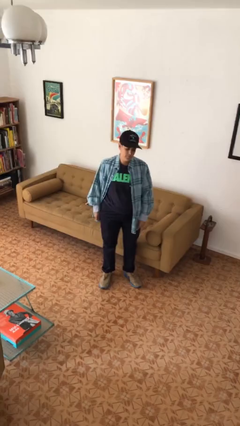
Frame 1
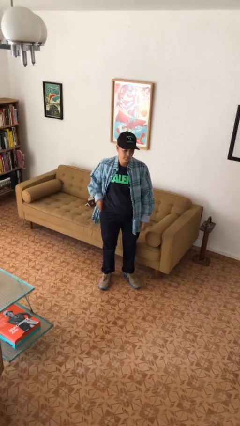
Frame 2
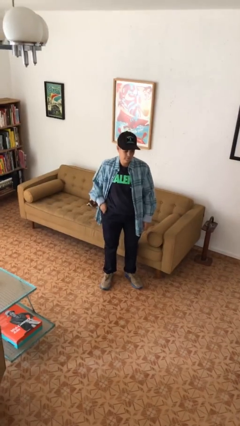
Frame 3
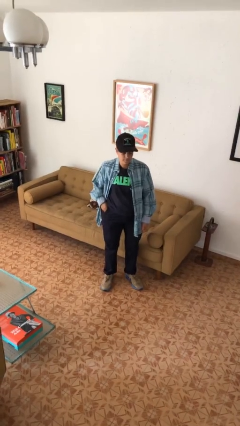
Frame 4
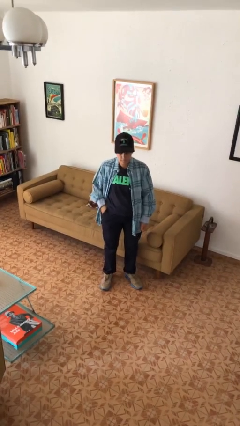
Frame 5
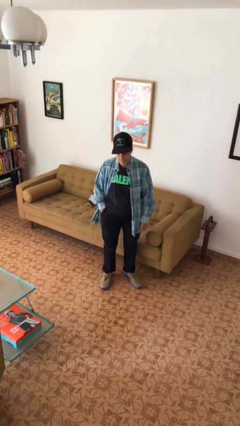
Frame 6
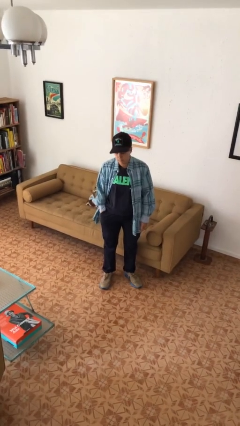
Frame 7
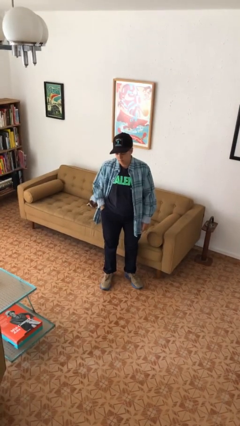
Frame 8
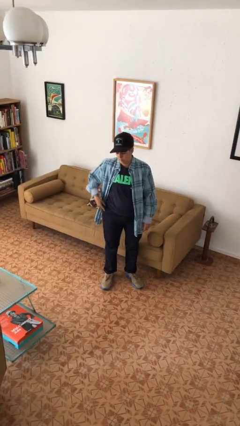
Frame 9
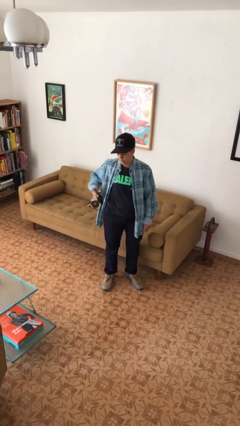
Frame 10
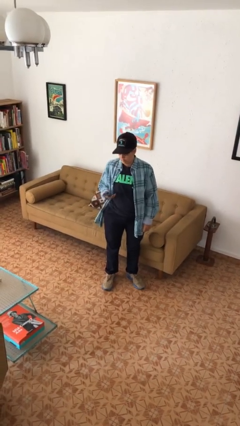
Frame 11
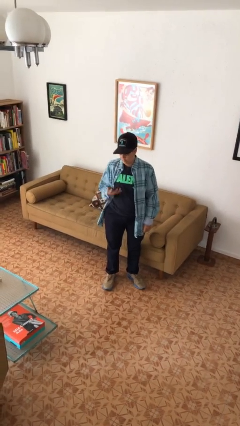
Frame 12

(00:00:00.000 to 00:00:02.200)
person takes phone from pocket

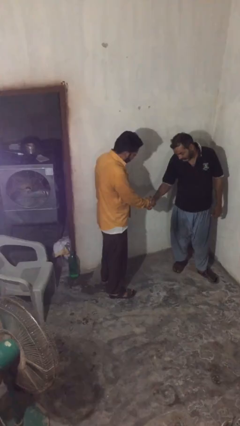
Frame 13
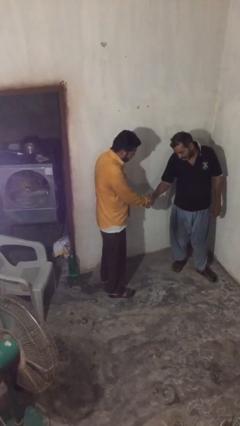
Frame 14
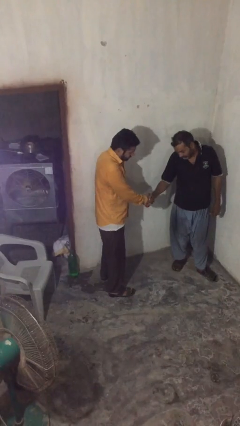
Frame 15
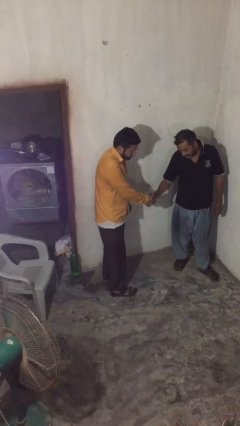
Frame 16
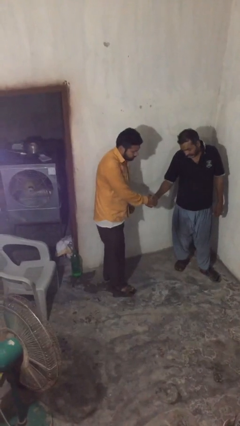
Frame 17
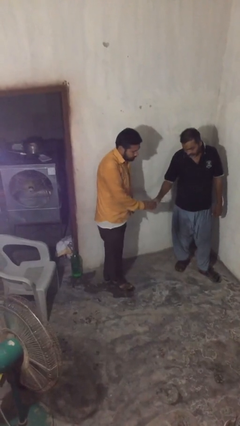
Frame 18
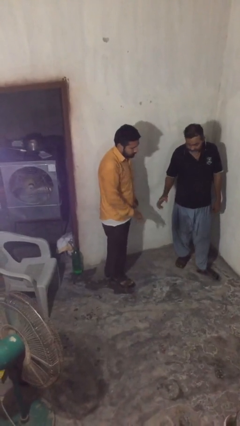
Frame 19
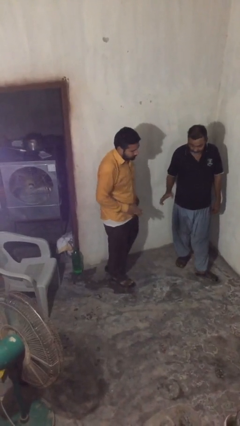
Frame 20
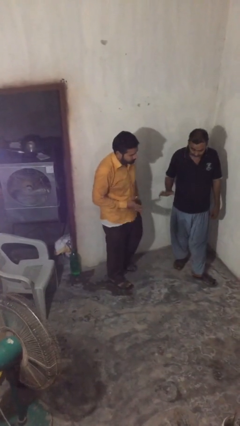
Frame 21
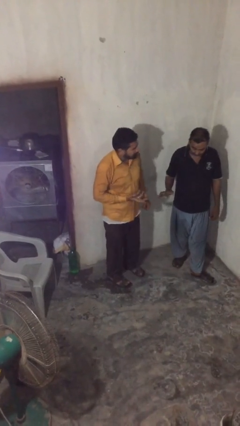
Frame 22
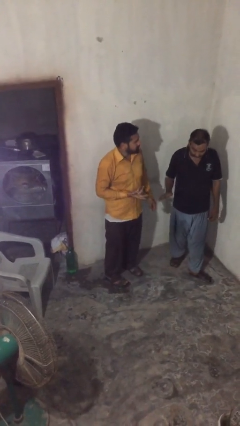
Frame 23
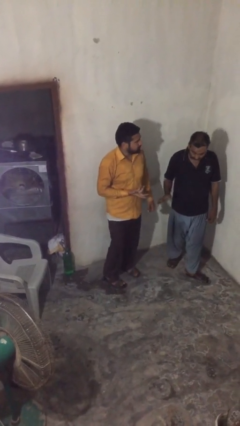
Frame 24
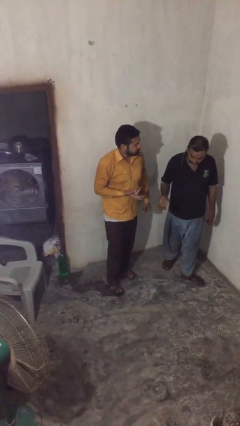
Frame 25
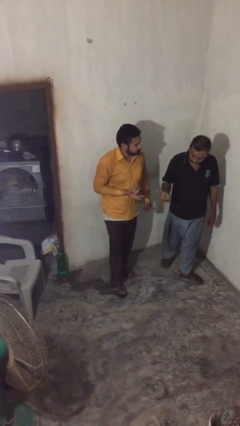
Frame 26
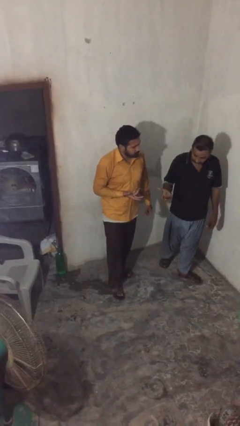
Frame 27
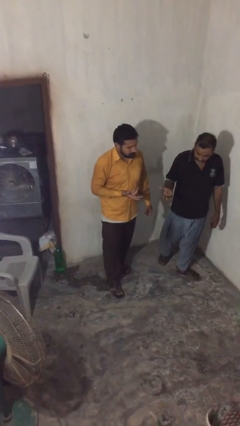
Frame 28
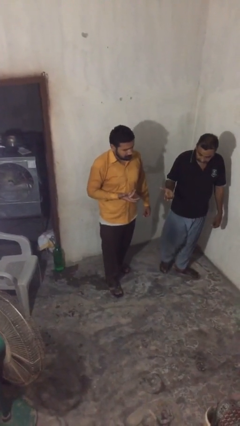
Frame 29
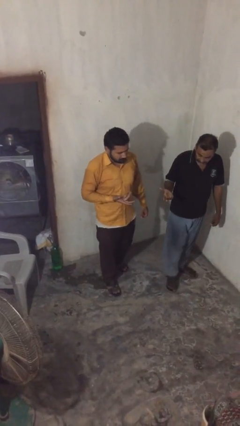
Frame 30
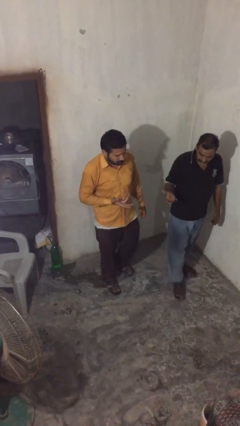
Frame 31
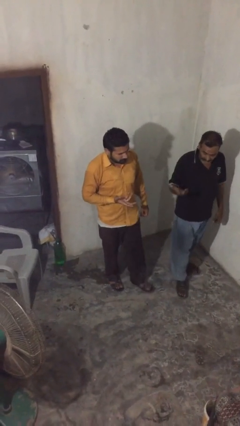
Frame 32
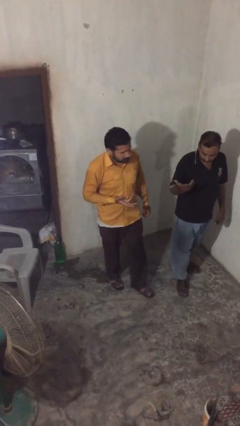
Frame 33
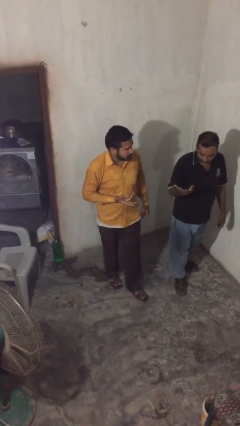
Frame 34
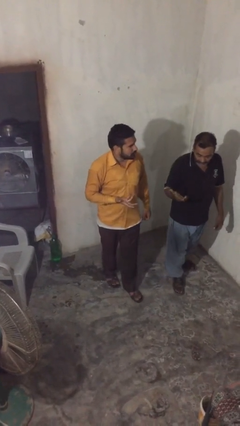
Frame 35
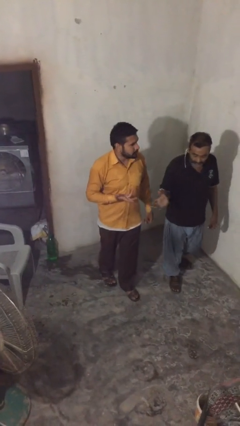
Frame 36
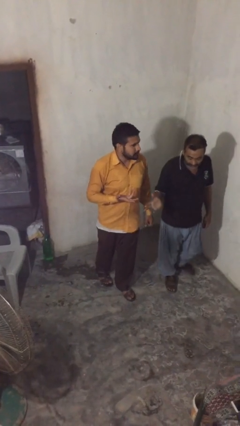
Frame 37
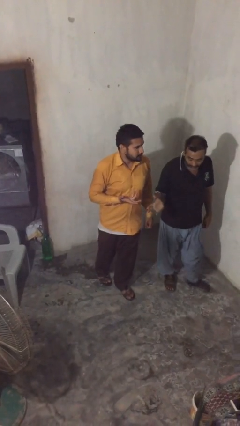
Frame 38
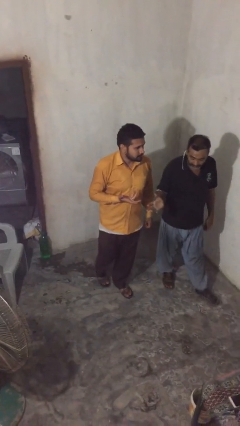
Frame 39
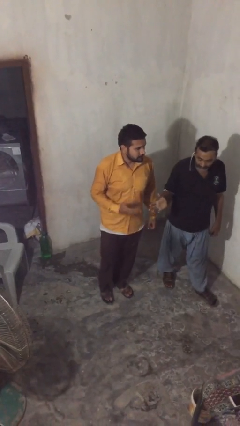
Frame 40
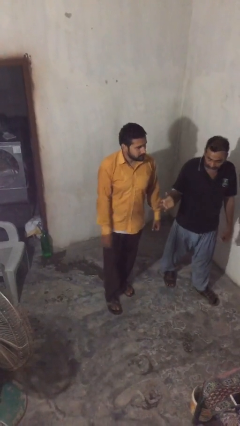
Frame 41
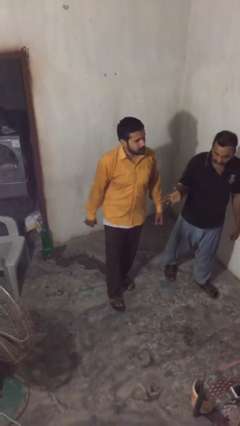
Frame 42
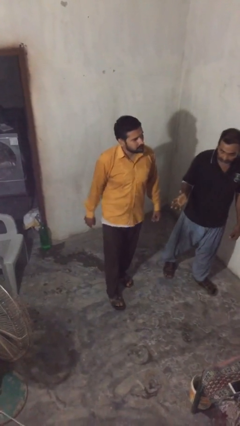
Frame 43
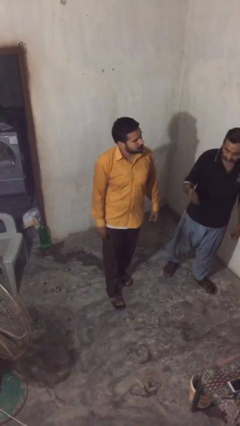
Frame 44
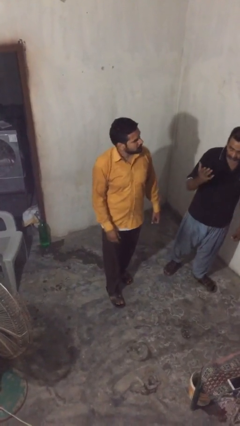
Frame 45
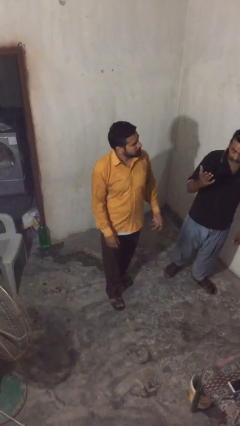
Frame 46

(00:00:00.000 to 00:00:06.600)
person talks to person

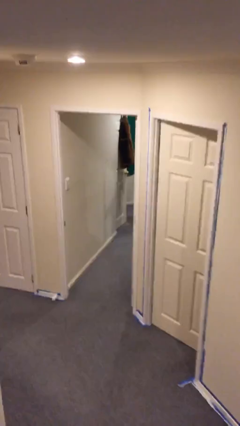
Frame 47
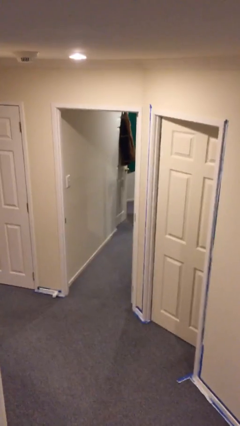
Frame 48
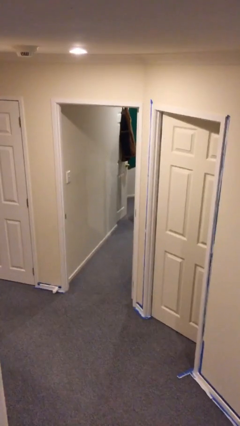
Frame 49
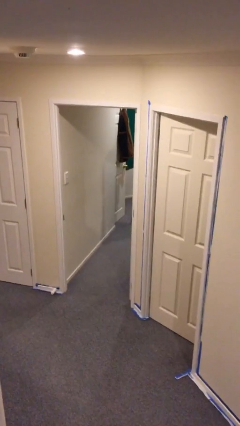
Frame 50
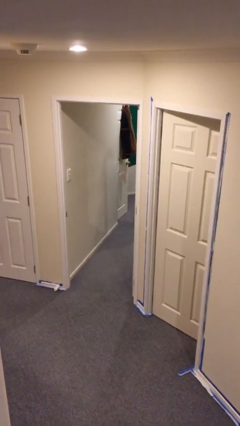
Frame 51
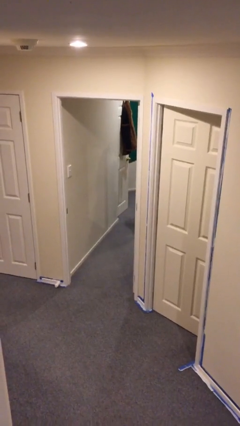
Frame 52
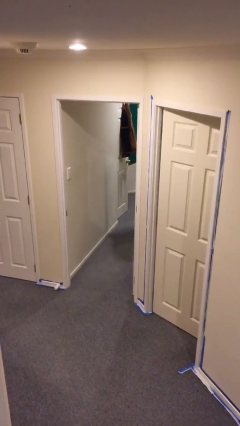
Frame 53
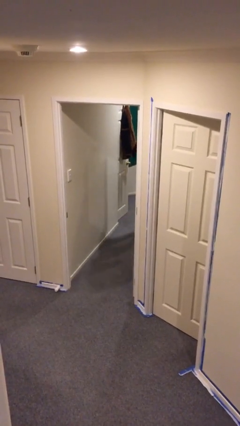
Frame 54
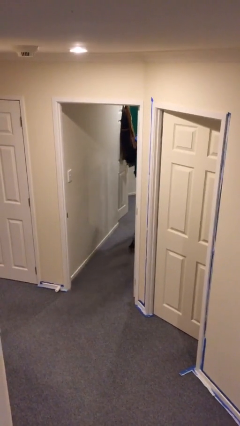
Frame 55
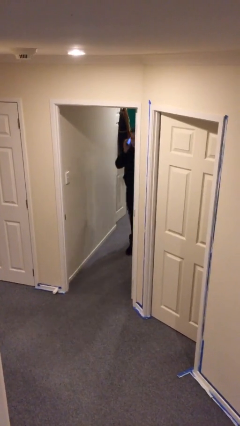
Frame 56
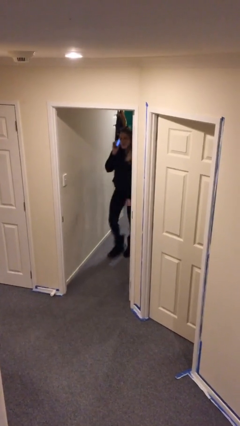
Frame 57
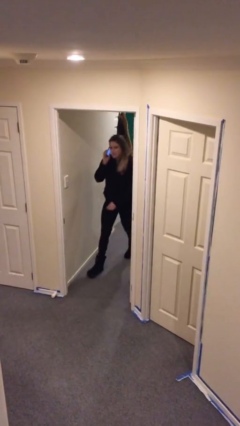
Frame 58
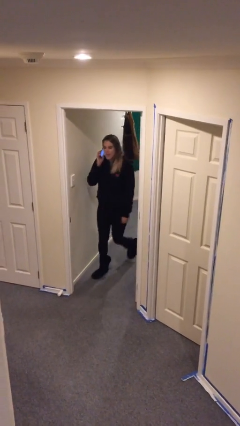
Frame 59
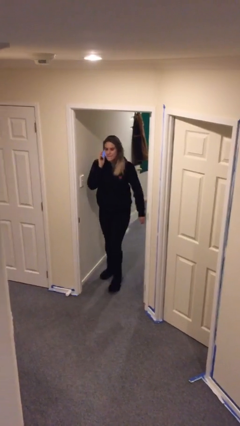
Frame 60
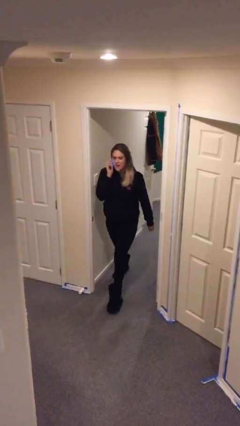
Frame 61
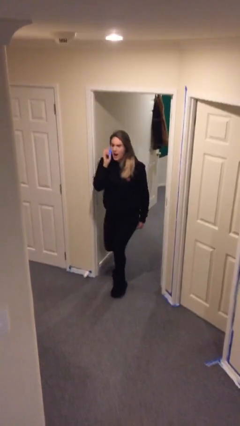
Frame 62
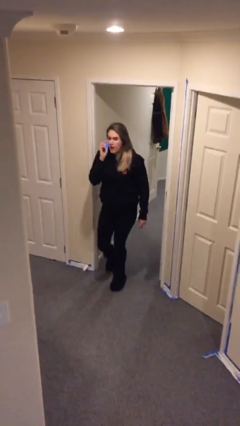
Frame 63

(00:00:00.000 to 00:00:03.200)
person enters scene through structure

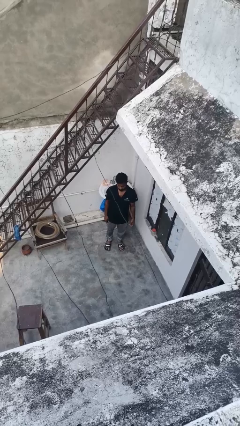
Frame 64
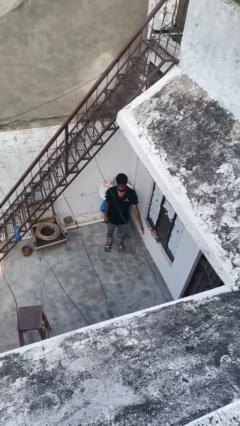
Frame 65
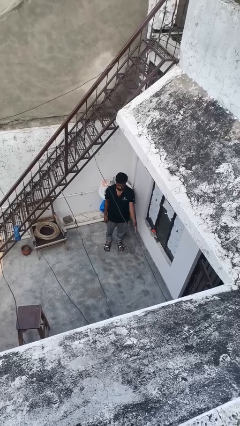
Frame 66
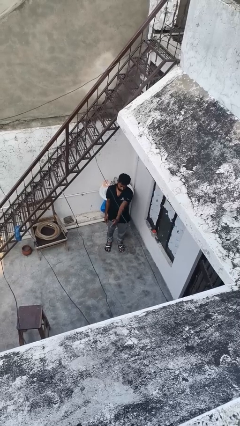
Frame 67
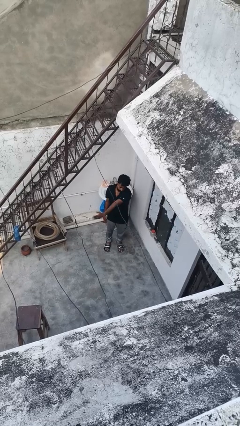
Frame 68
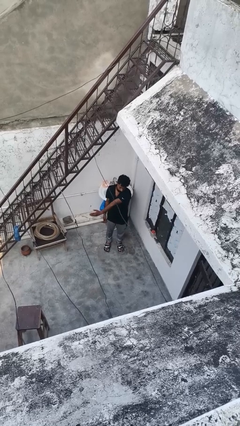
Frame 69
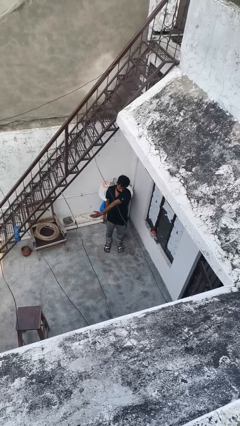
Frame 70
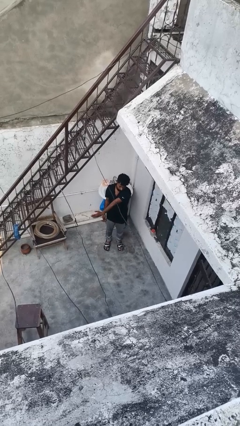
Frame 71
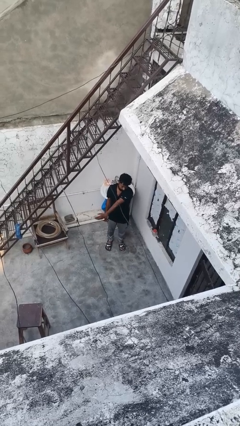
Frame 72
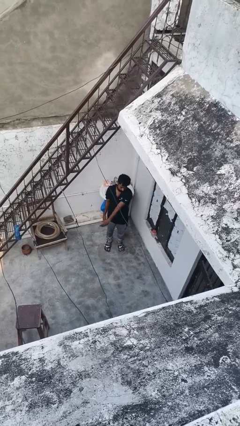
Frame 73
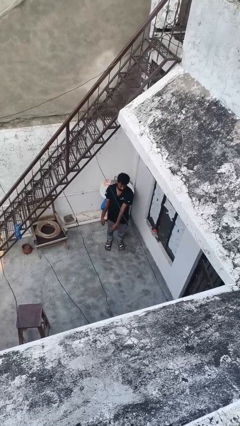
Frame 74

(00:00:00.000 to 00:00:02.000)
person gestures swipe left

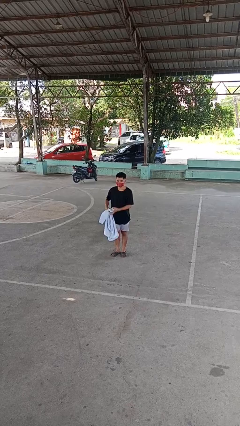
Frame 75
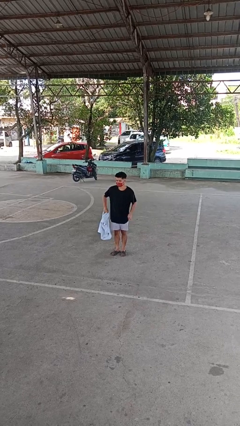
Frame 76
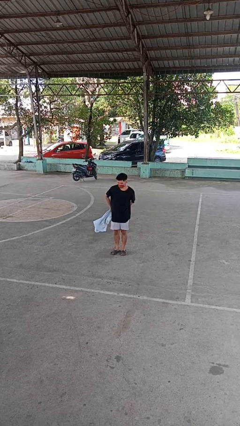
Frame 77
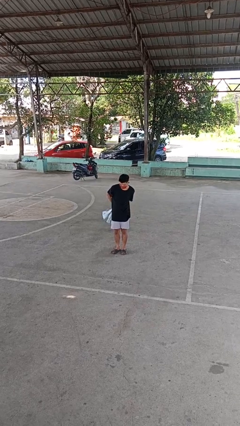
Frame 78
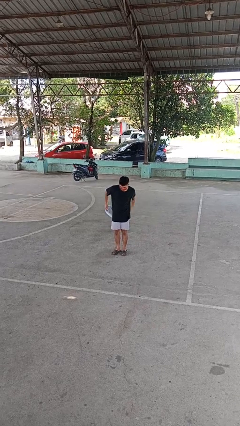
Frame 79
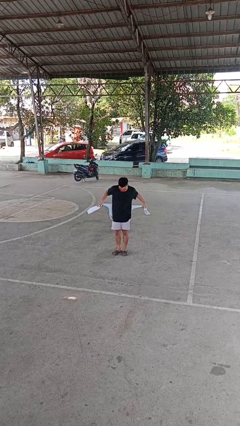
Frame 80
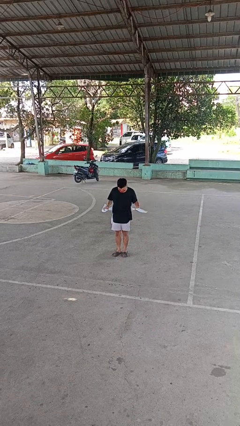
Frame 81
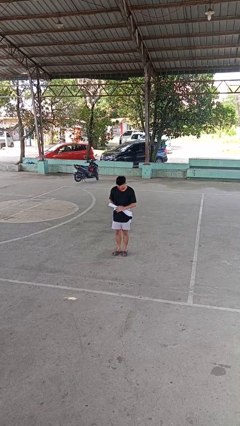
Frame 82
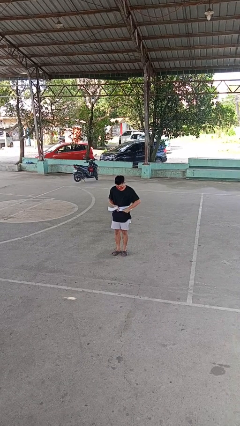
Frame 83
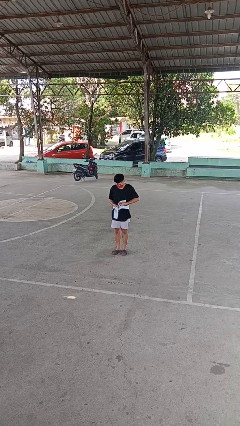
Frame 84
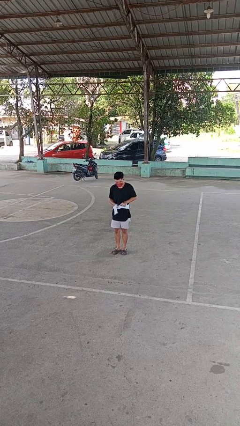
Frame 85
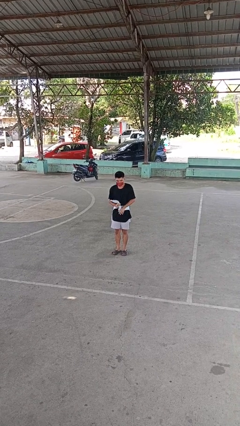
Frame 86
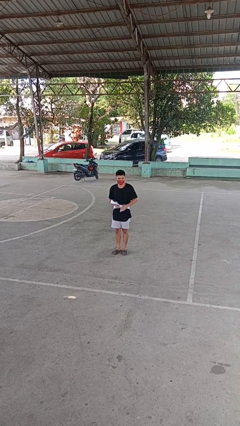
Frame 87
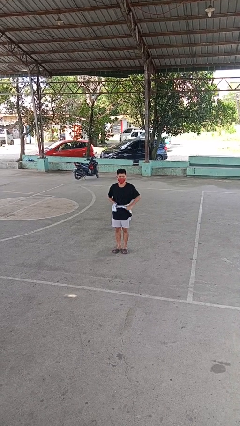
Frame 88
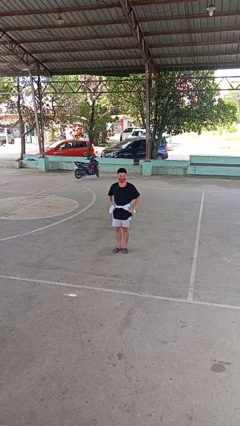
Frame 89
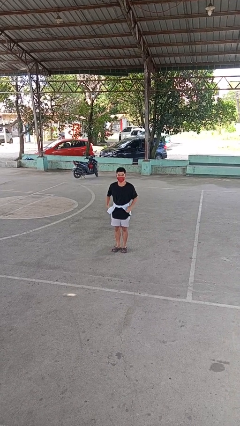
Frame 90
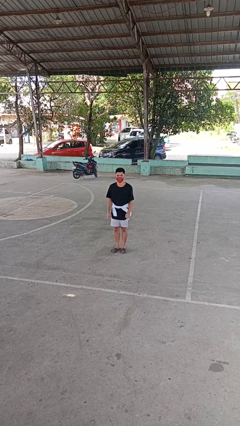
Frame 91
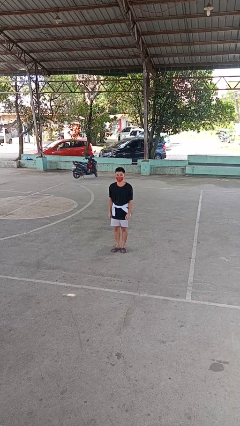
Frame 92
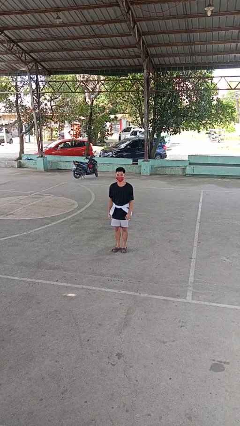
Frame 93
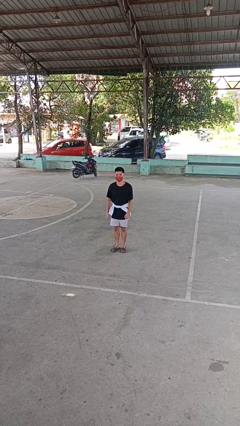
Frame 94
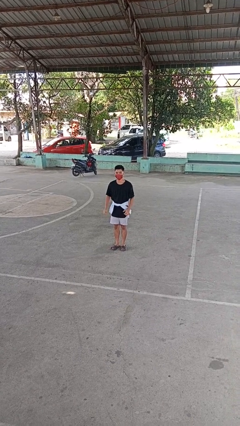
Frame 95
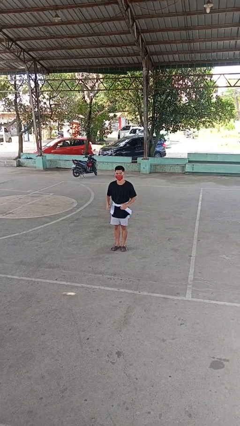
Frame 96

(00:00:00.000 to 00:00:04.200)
person ties jacket around waist
